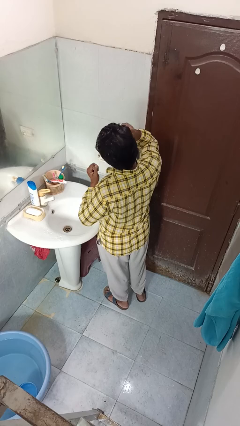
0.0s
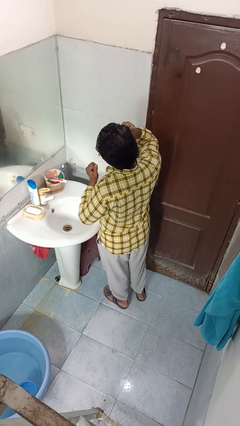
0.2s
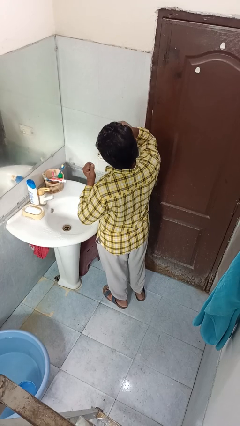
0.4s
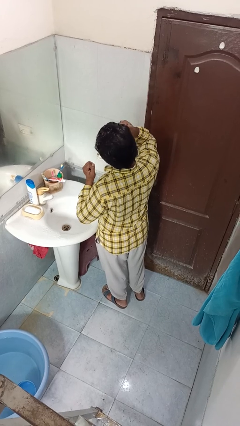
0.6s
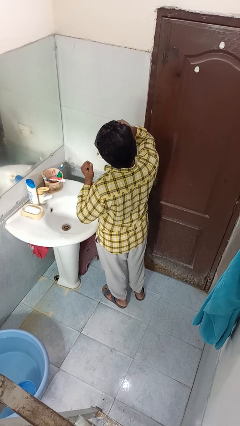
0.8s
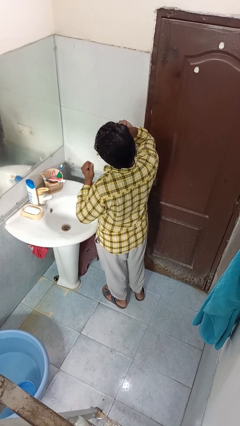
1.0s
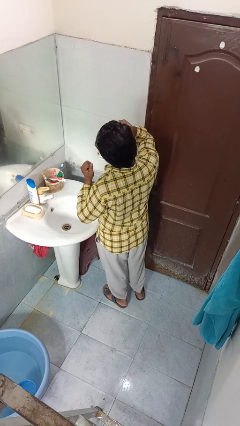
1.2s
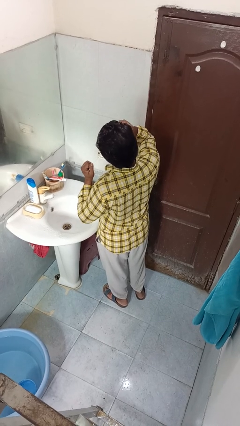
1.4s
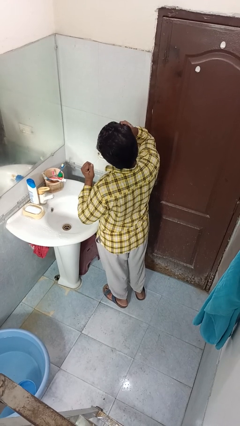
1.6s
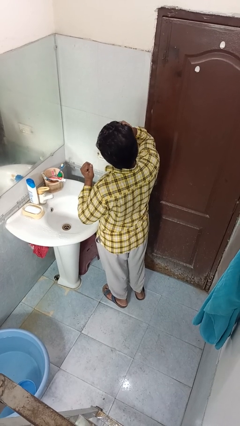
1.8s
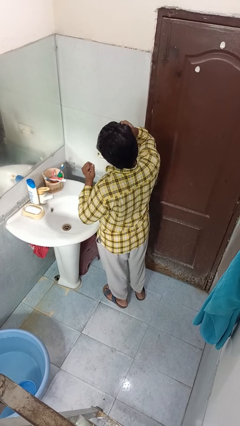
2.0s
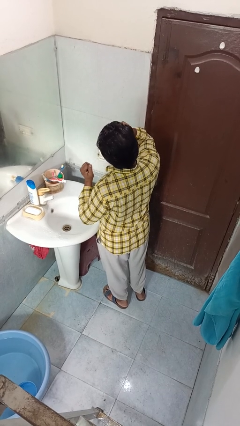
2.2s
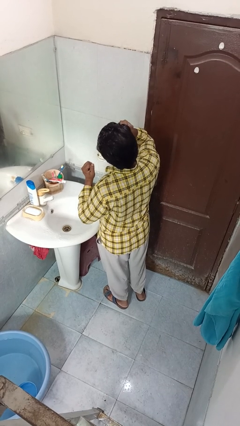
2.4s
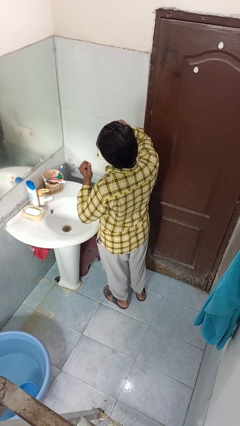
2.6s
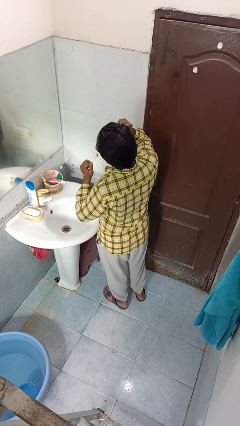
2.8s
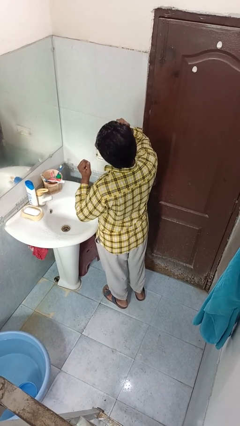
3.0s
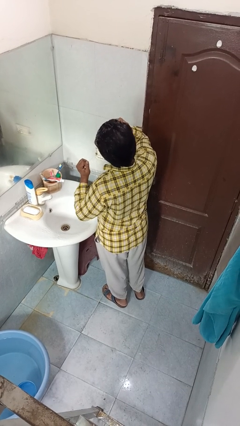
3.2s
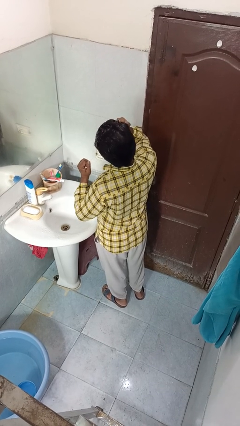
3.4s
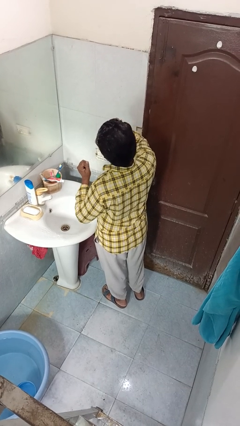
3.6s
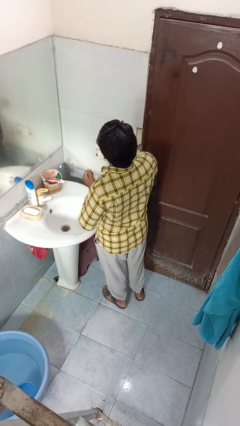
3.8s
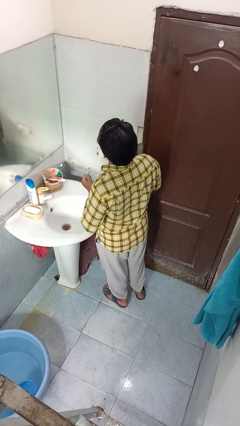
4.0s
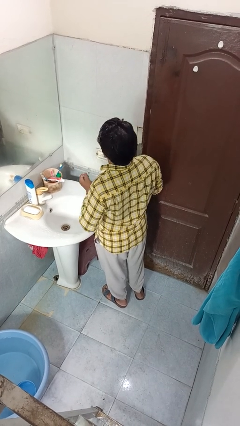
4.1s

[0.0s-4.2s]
person flosses

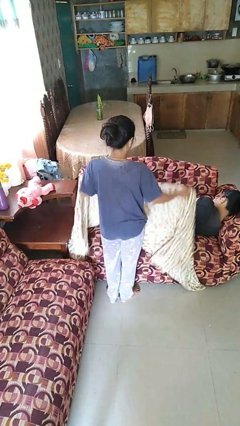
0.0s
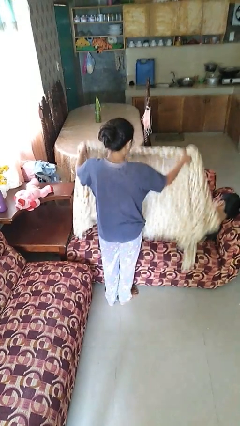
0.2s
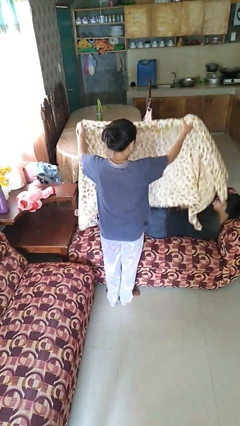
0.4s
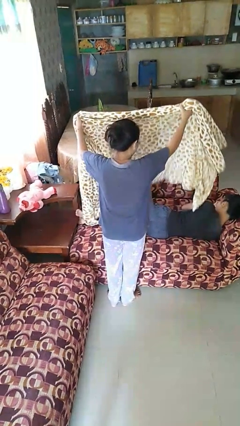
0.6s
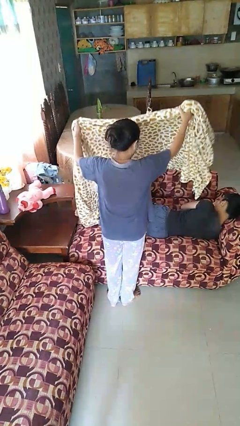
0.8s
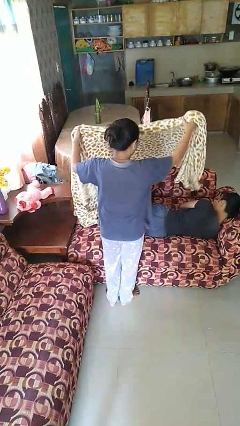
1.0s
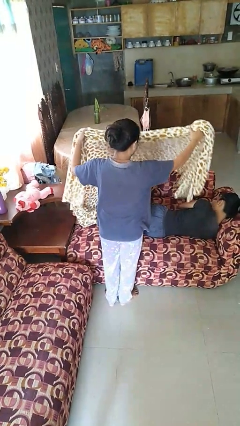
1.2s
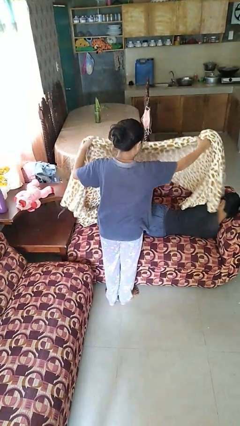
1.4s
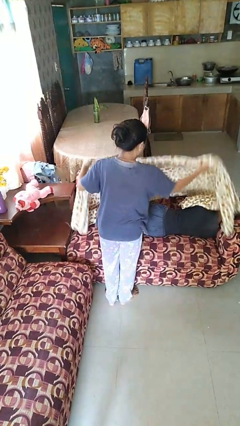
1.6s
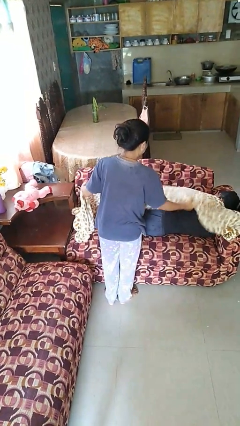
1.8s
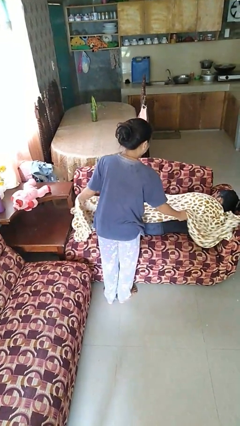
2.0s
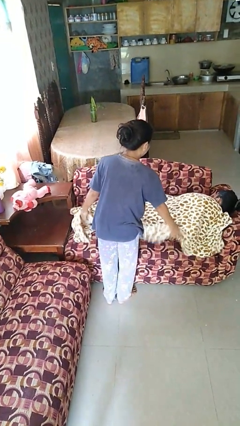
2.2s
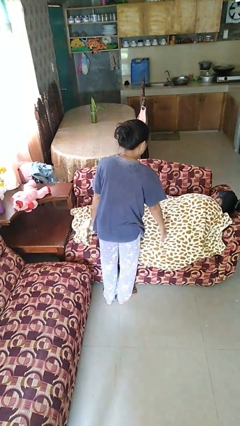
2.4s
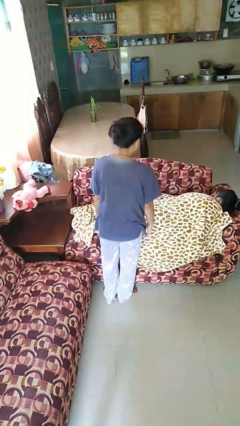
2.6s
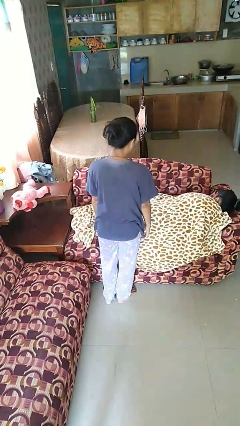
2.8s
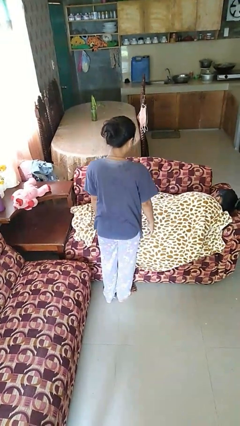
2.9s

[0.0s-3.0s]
person covers friend with blanket

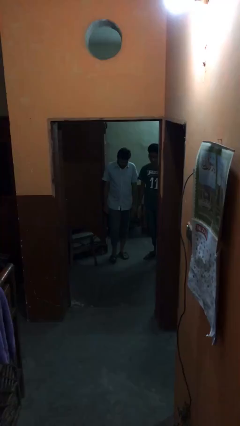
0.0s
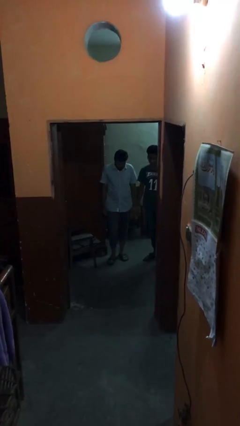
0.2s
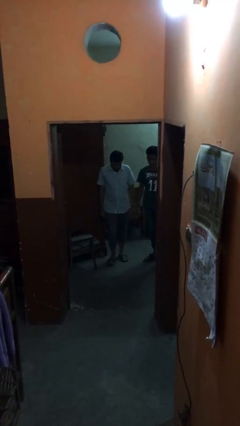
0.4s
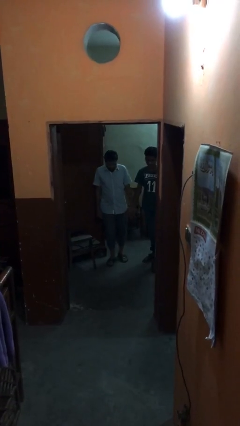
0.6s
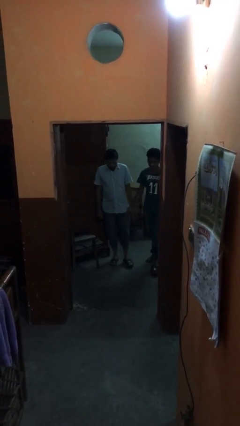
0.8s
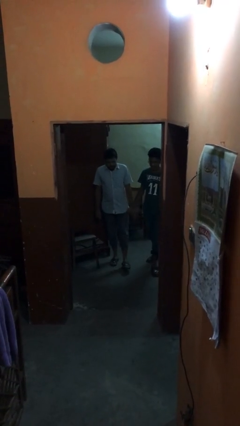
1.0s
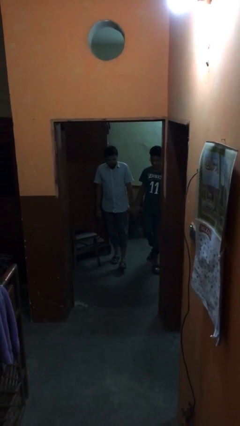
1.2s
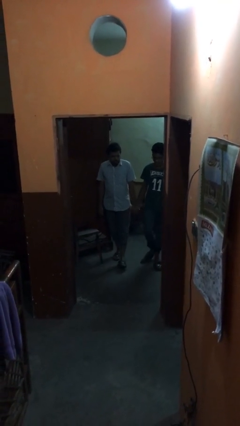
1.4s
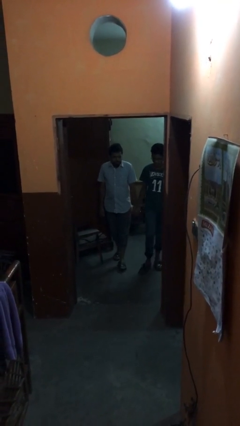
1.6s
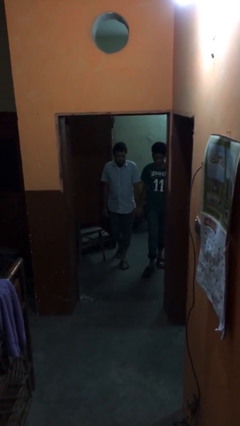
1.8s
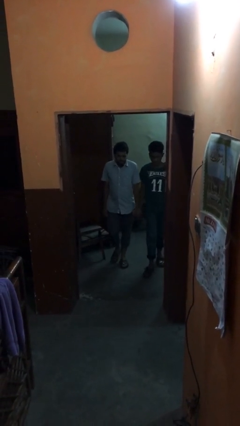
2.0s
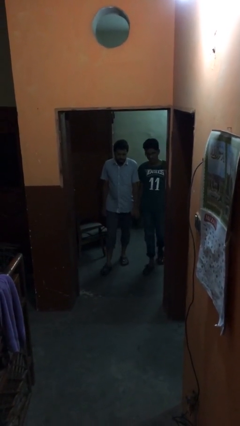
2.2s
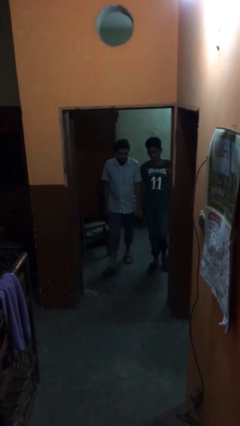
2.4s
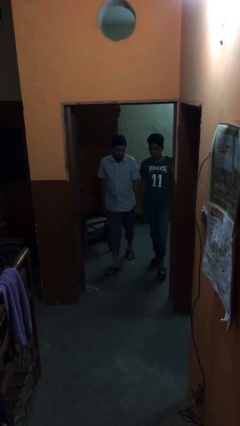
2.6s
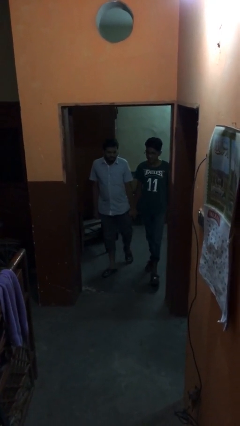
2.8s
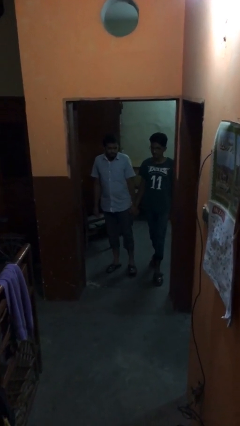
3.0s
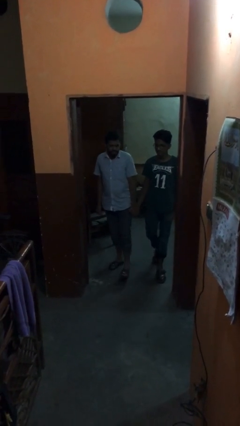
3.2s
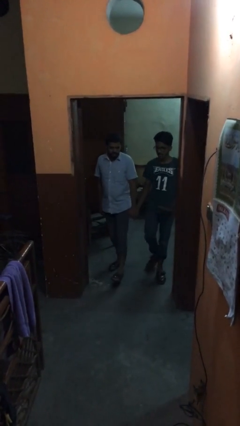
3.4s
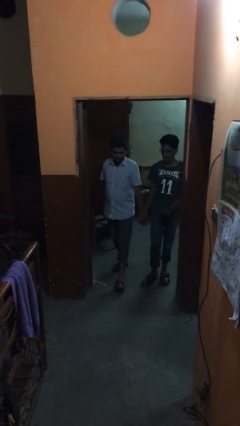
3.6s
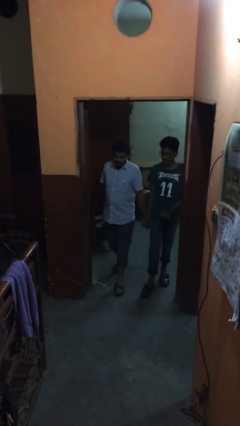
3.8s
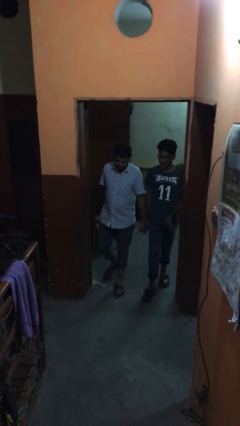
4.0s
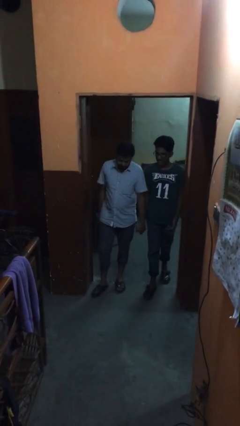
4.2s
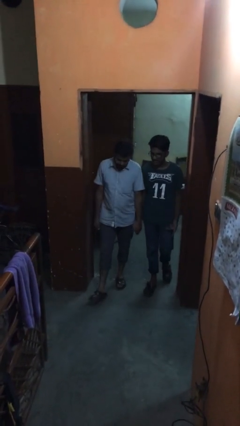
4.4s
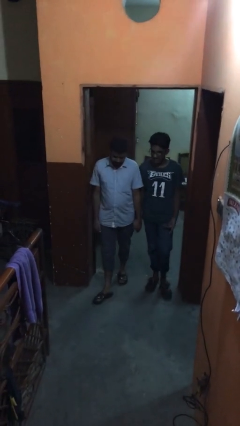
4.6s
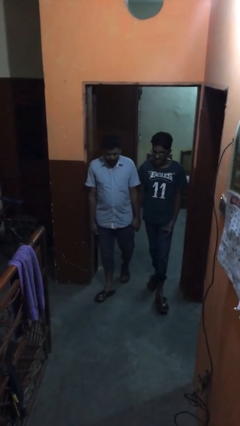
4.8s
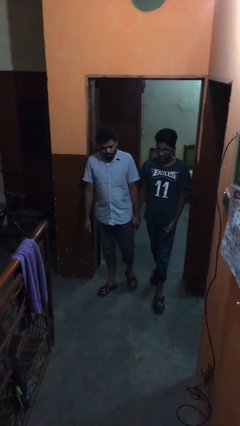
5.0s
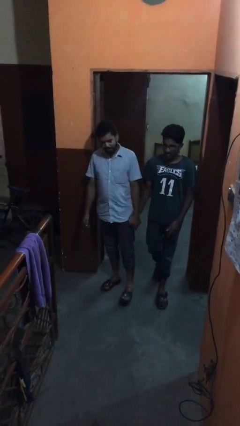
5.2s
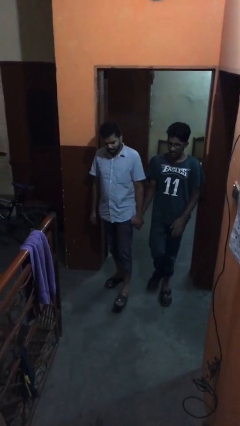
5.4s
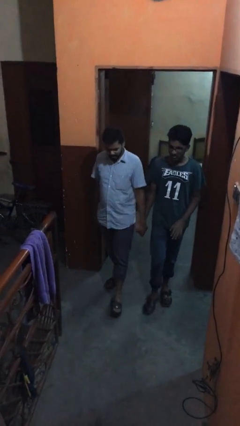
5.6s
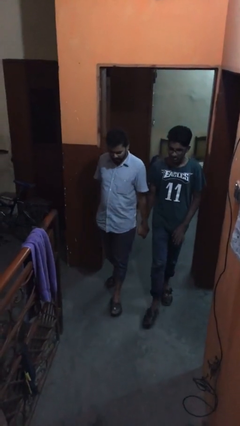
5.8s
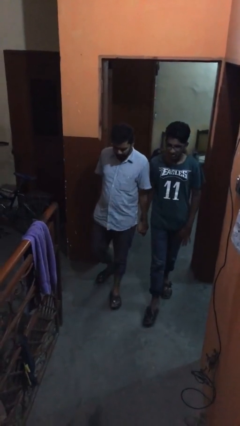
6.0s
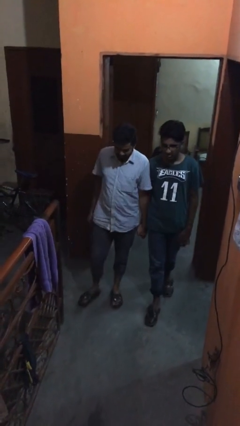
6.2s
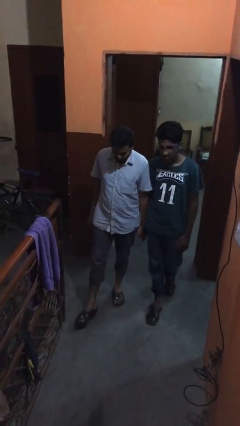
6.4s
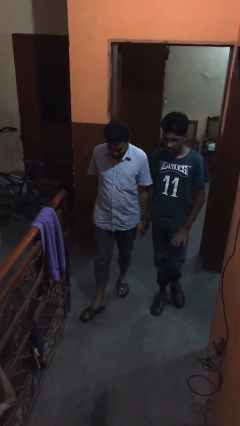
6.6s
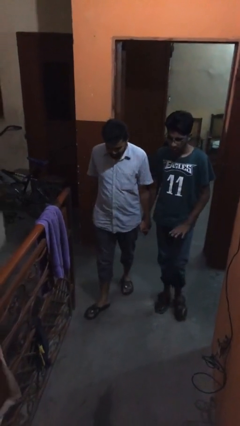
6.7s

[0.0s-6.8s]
person holds hand

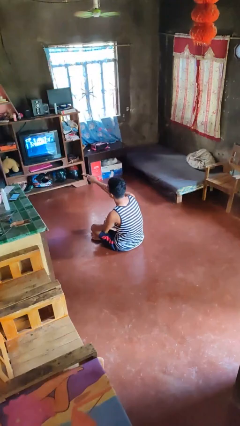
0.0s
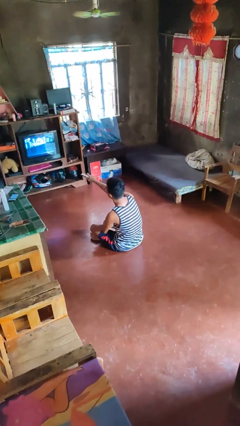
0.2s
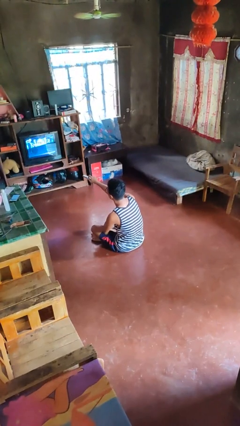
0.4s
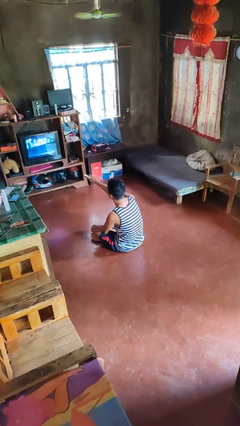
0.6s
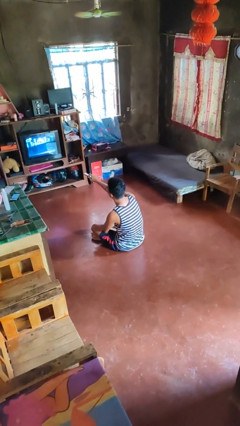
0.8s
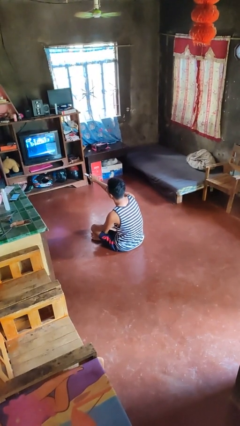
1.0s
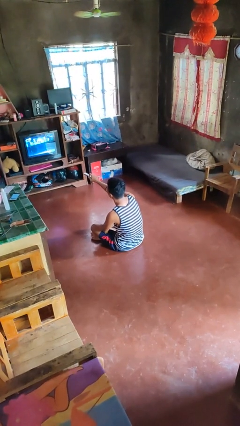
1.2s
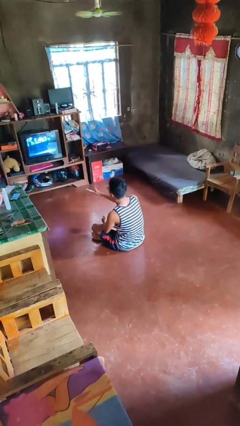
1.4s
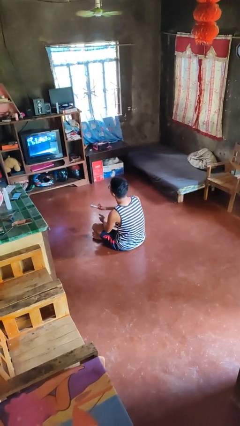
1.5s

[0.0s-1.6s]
person uses television remote

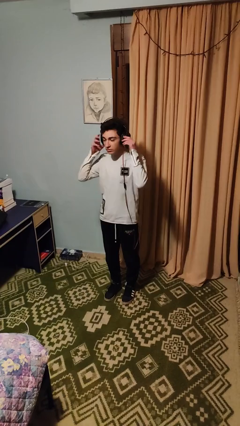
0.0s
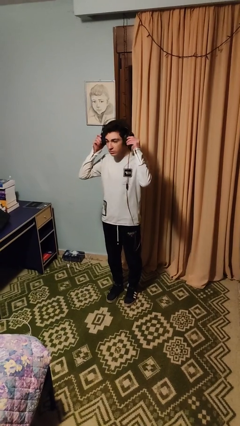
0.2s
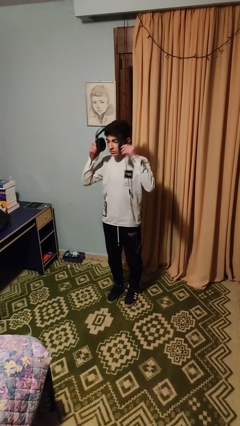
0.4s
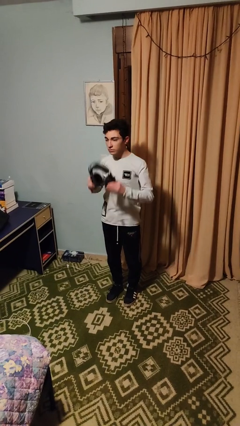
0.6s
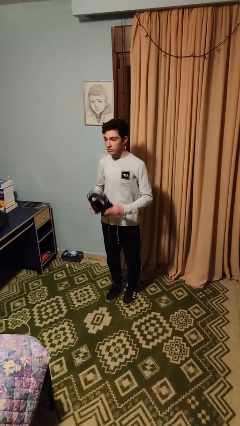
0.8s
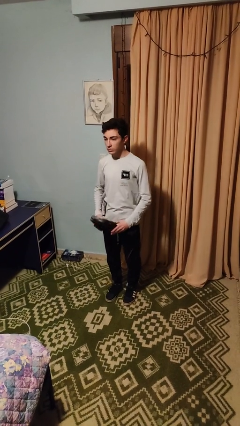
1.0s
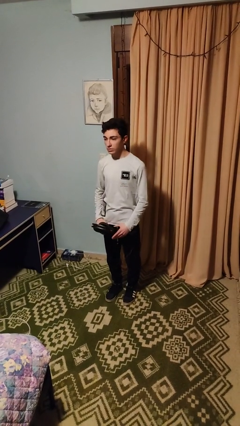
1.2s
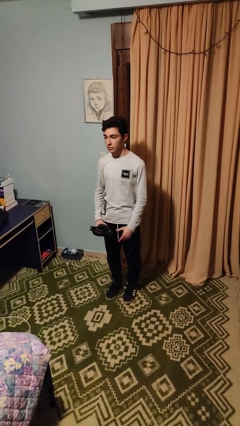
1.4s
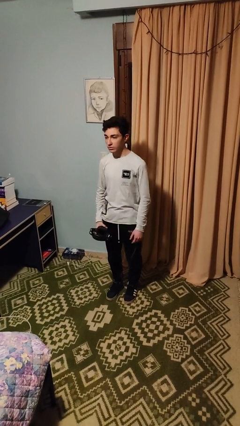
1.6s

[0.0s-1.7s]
person takes off headphones

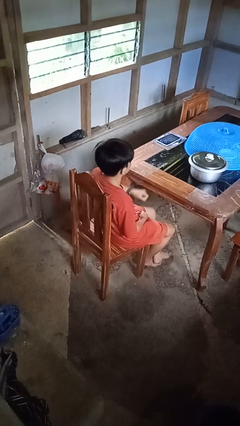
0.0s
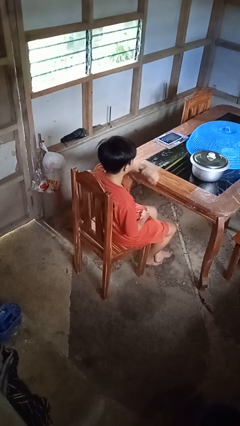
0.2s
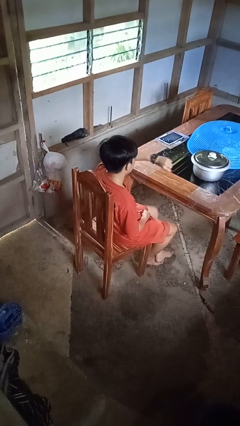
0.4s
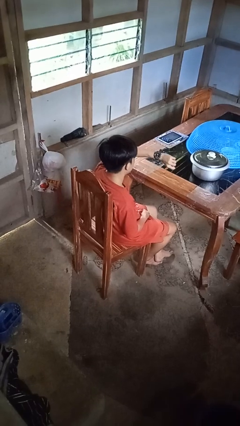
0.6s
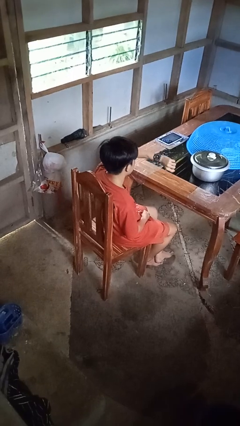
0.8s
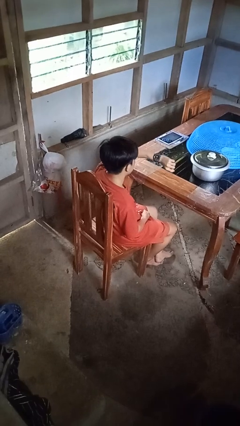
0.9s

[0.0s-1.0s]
person looks at wristwatch
